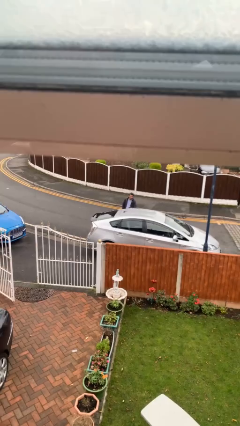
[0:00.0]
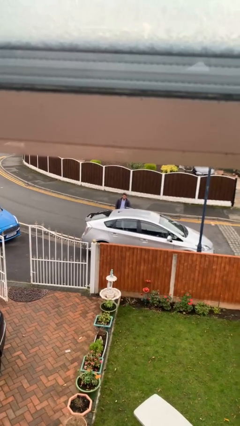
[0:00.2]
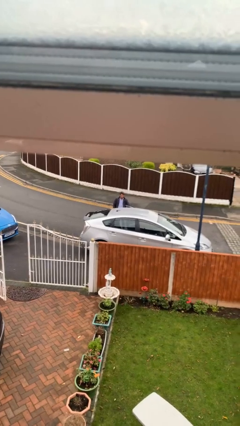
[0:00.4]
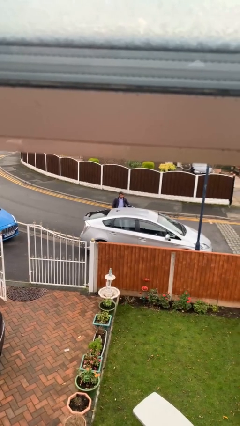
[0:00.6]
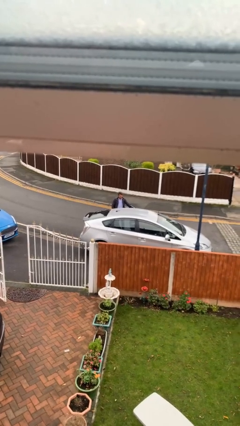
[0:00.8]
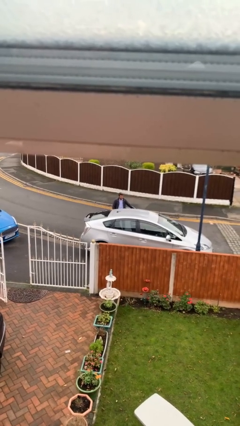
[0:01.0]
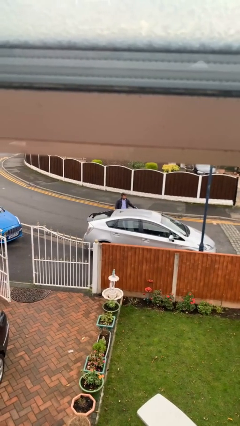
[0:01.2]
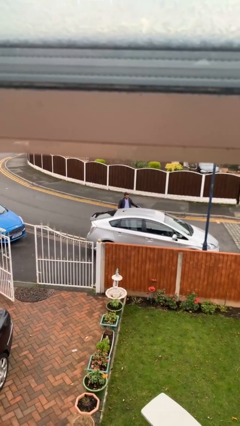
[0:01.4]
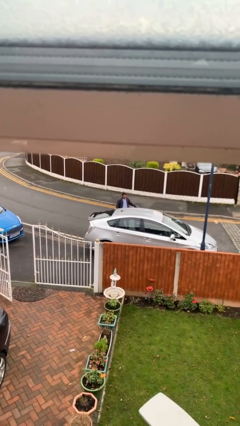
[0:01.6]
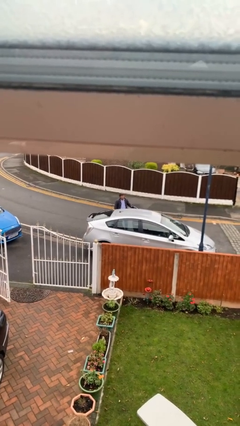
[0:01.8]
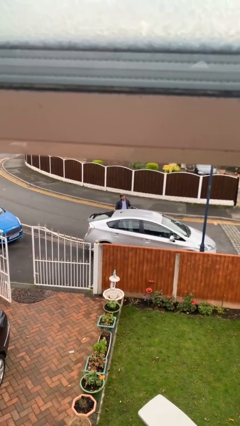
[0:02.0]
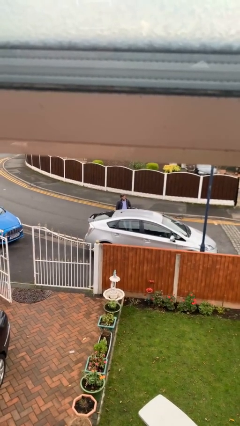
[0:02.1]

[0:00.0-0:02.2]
person opens car door

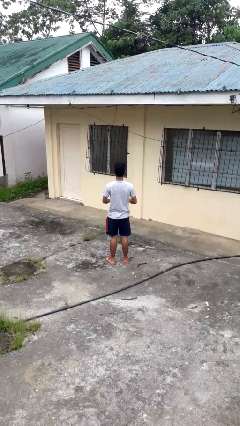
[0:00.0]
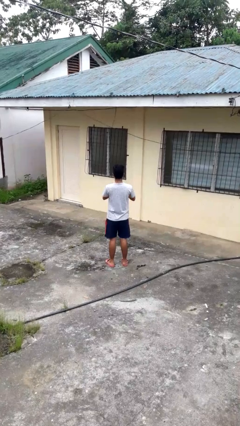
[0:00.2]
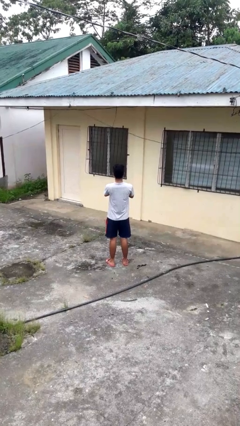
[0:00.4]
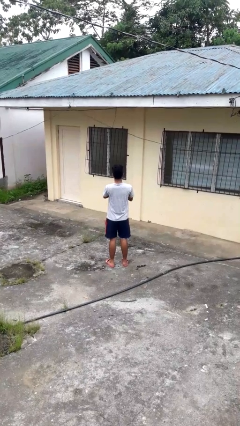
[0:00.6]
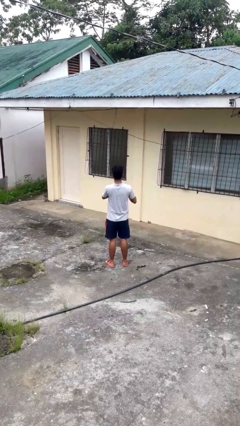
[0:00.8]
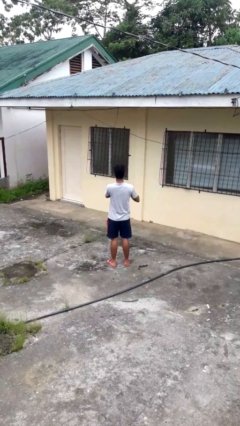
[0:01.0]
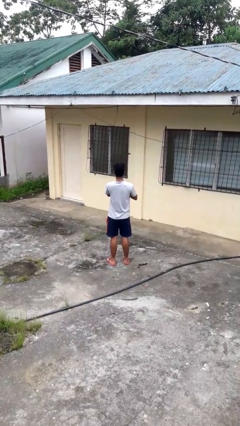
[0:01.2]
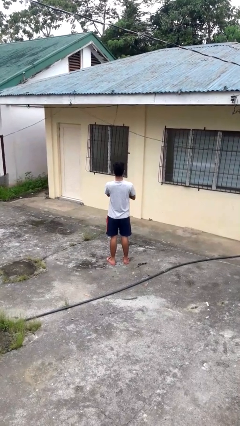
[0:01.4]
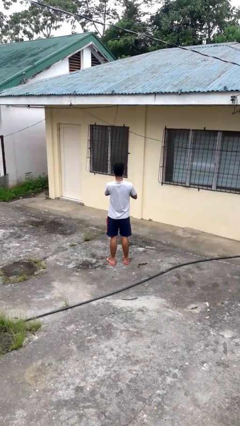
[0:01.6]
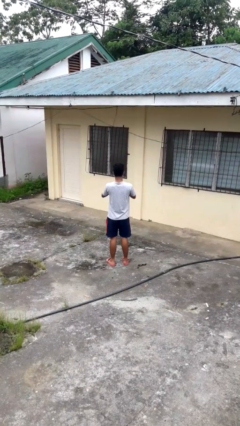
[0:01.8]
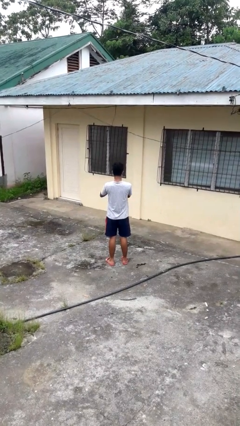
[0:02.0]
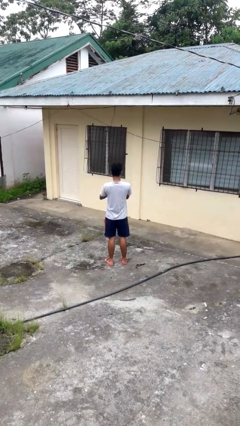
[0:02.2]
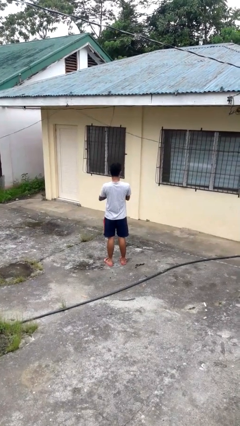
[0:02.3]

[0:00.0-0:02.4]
person cracks knuckles

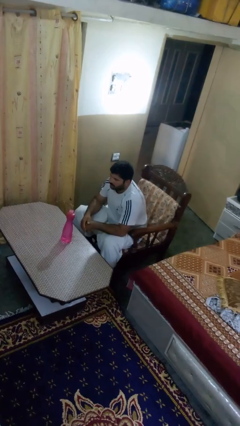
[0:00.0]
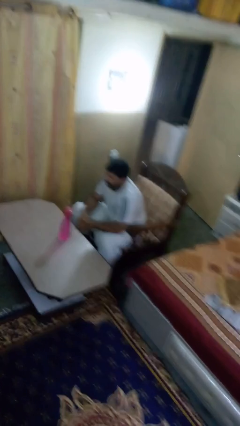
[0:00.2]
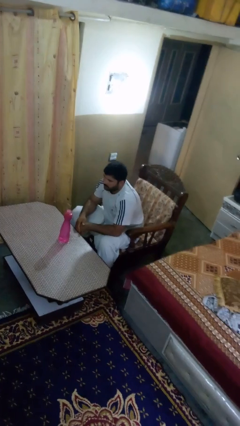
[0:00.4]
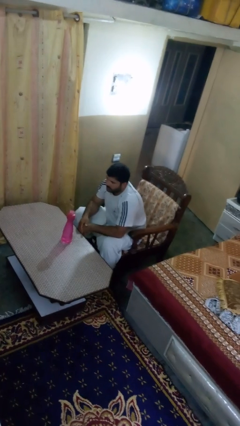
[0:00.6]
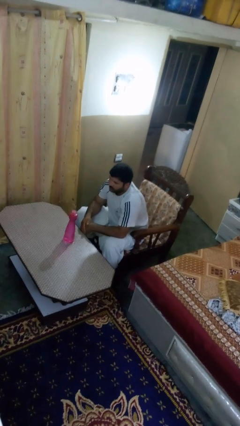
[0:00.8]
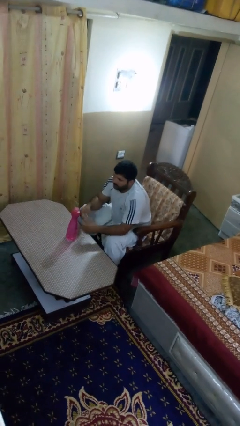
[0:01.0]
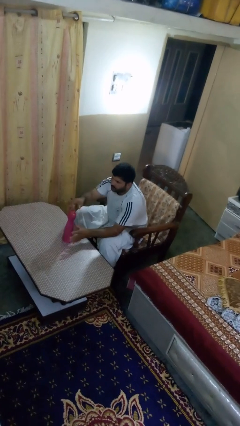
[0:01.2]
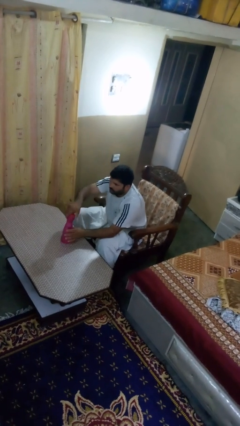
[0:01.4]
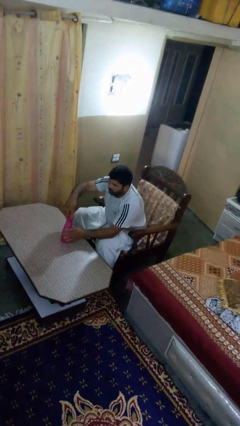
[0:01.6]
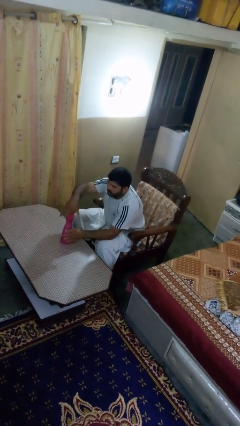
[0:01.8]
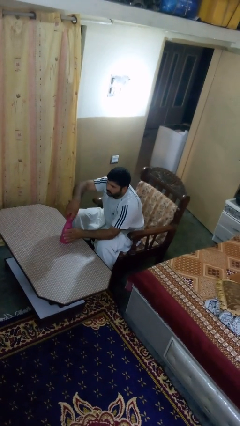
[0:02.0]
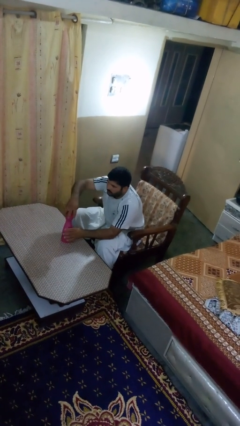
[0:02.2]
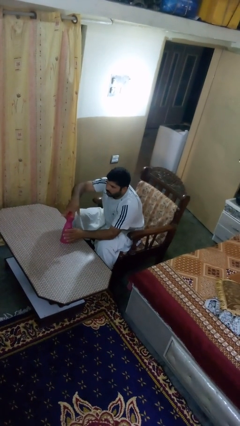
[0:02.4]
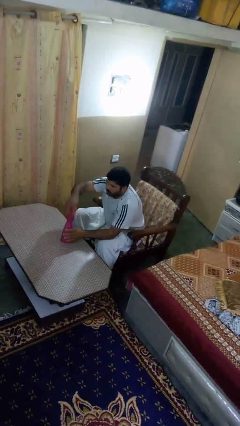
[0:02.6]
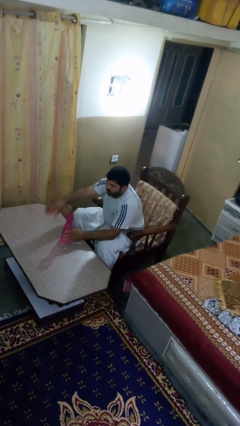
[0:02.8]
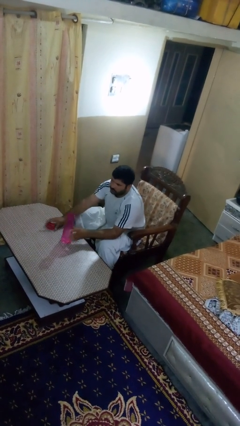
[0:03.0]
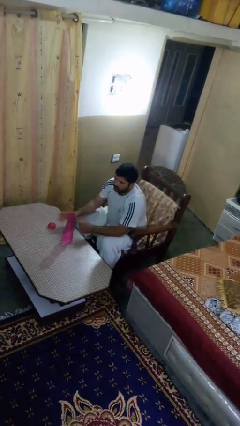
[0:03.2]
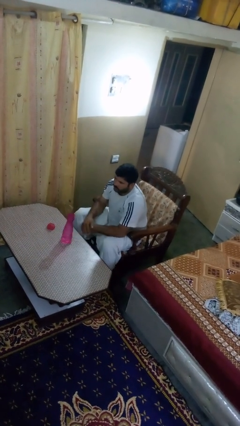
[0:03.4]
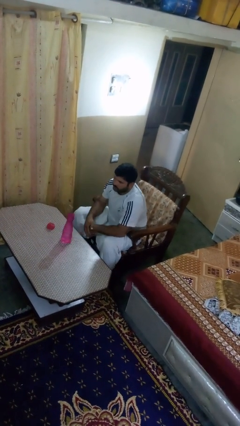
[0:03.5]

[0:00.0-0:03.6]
person unscrews lid from bottle

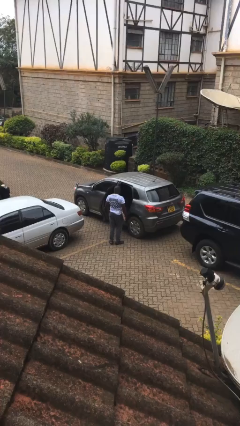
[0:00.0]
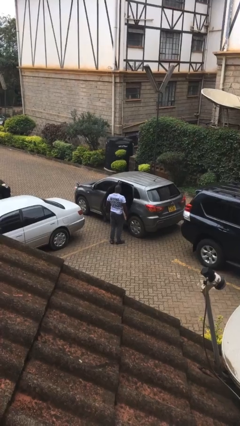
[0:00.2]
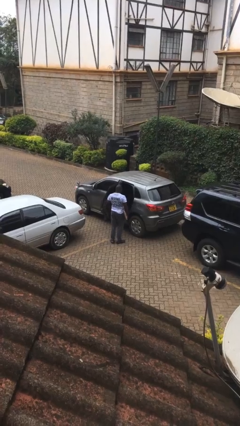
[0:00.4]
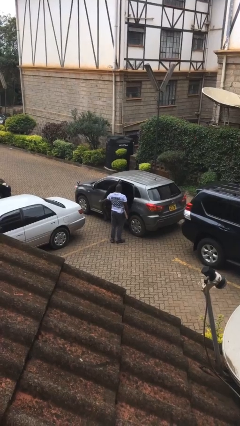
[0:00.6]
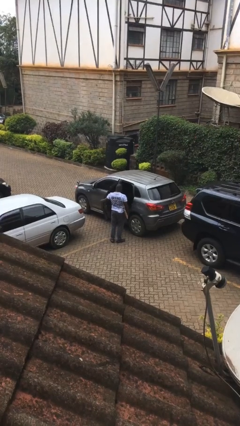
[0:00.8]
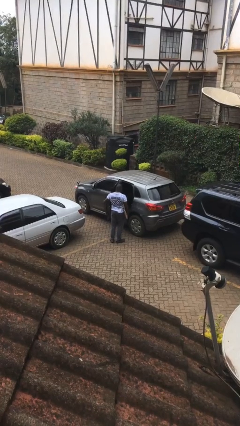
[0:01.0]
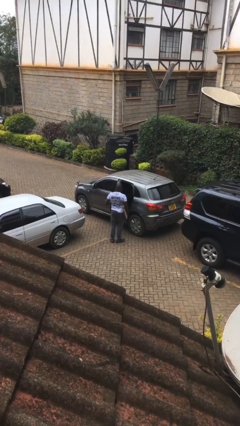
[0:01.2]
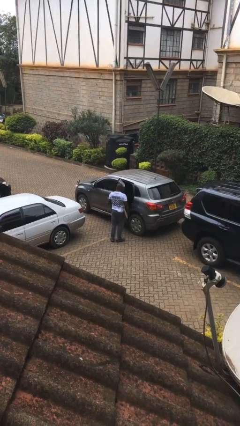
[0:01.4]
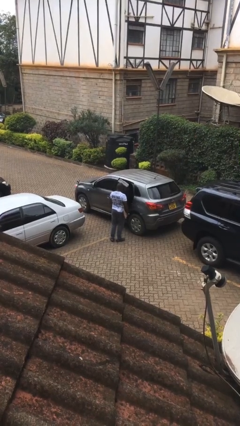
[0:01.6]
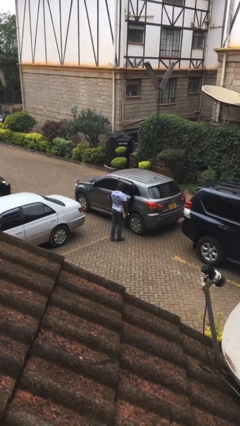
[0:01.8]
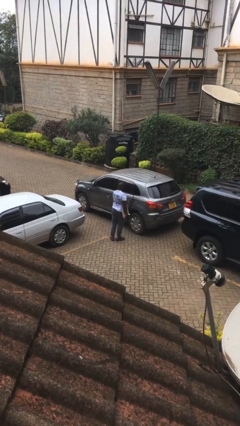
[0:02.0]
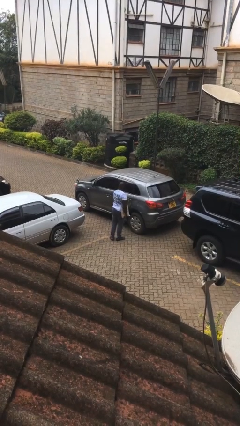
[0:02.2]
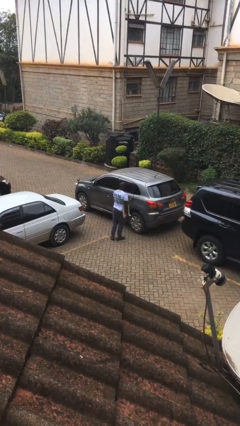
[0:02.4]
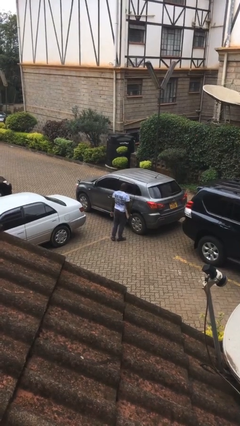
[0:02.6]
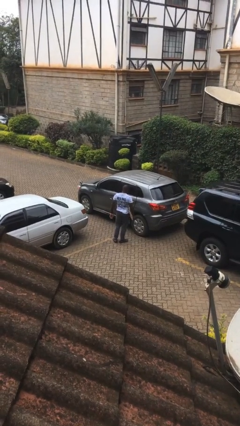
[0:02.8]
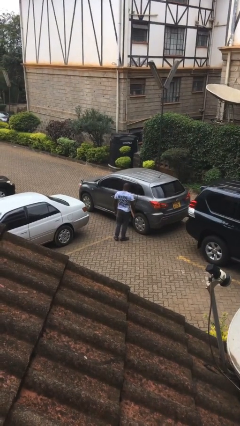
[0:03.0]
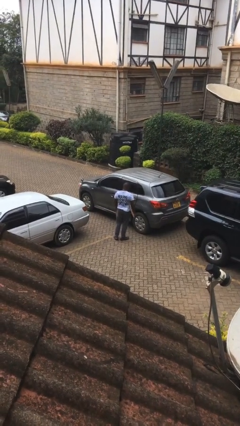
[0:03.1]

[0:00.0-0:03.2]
person closes car door

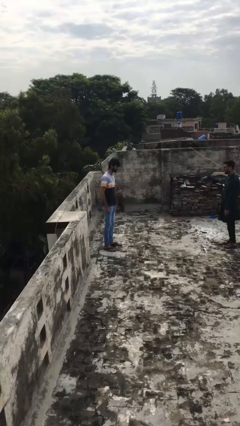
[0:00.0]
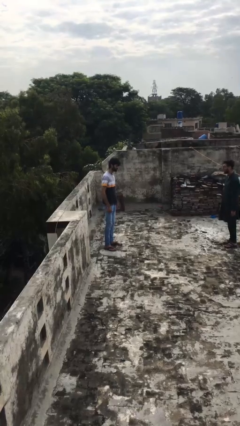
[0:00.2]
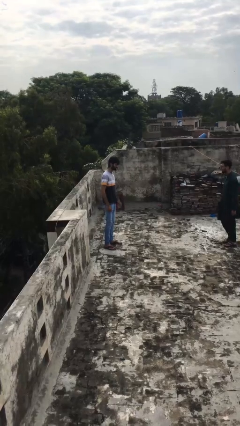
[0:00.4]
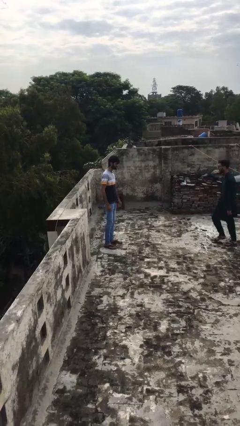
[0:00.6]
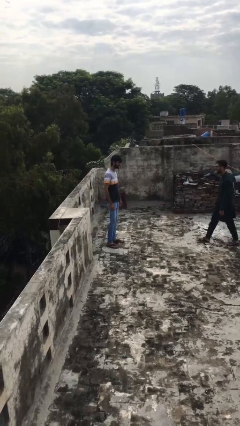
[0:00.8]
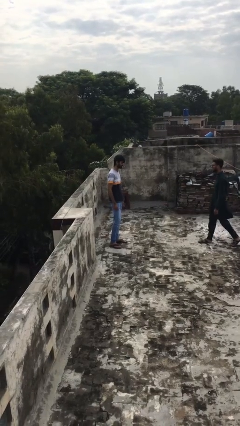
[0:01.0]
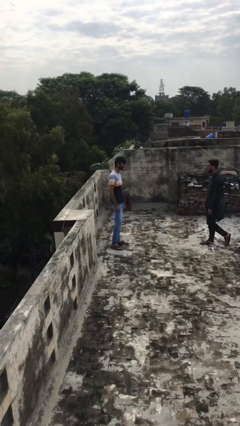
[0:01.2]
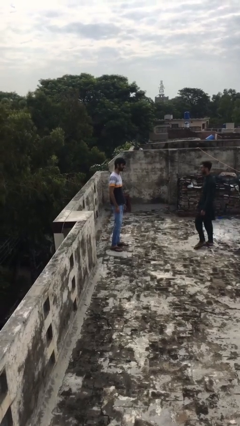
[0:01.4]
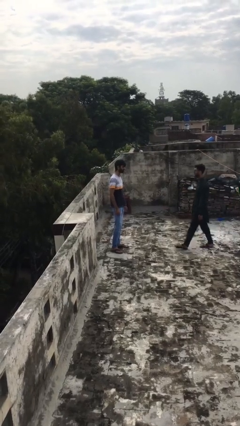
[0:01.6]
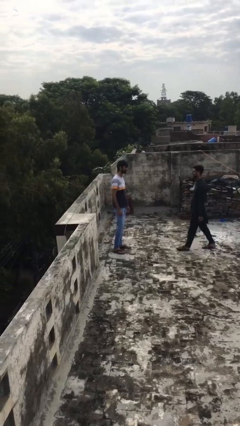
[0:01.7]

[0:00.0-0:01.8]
person shakes hand

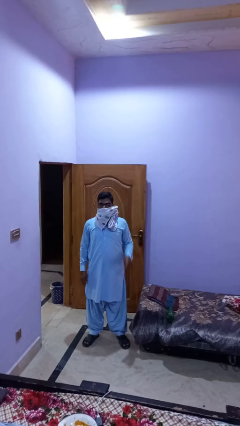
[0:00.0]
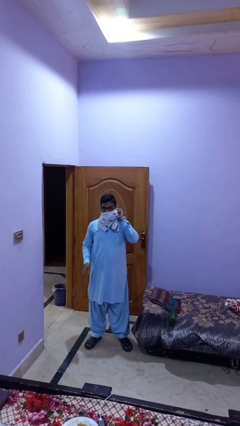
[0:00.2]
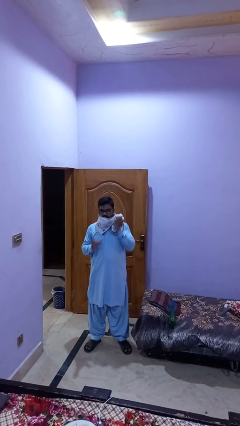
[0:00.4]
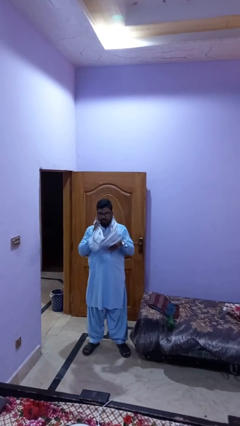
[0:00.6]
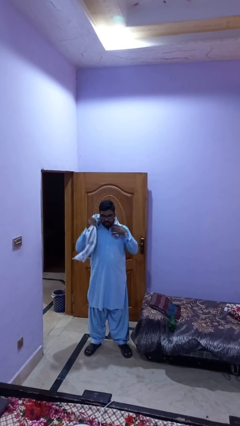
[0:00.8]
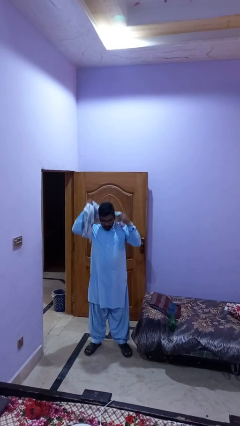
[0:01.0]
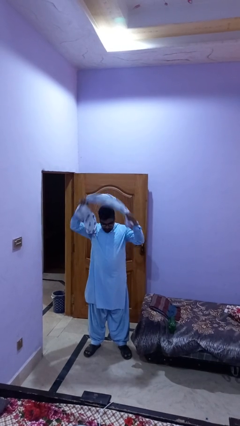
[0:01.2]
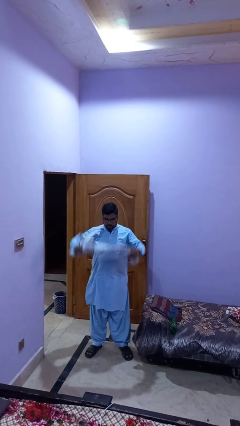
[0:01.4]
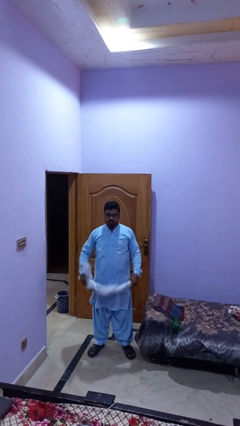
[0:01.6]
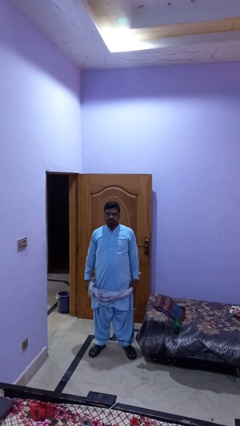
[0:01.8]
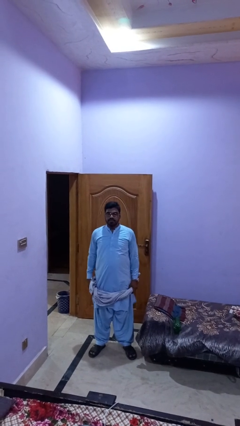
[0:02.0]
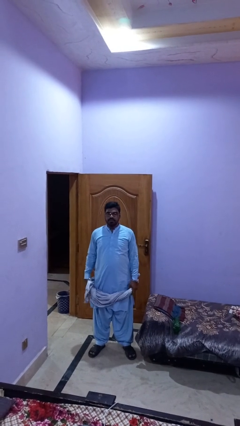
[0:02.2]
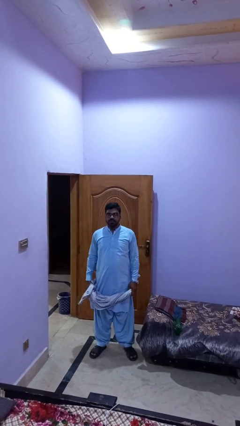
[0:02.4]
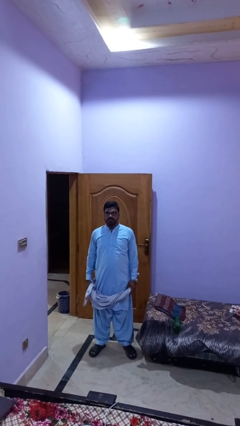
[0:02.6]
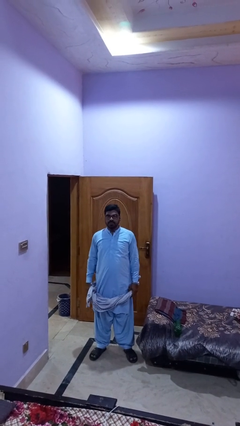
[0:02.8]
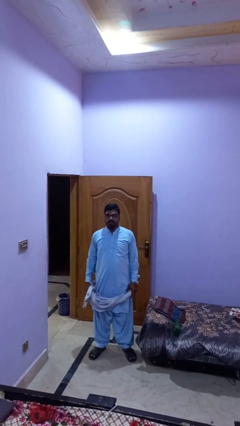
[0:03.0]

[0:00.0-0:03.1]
person takes off scarf

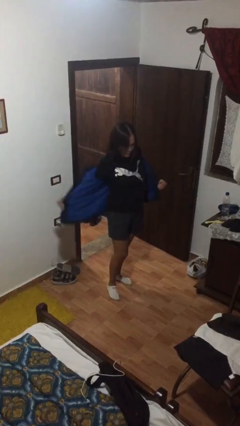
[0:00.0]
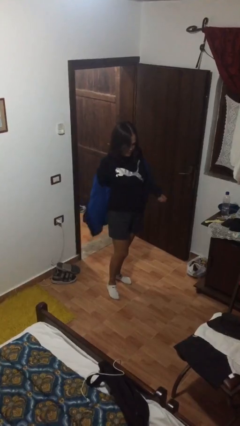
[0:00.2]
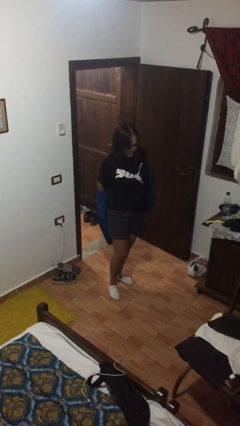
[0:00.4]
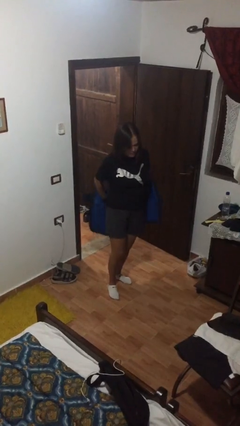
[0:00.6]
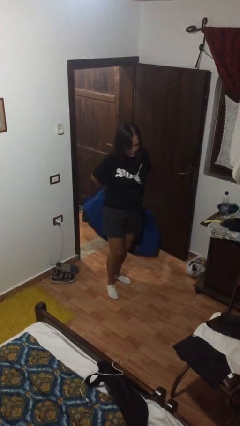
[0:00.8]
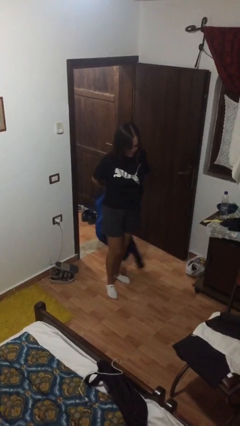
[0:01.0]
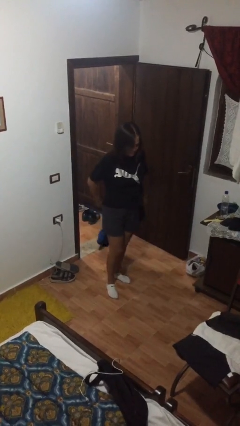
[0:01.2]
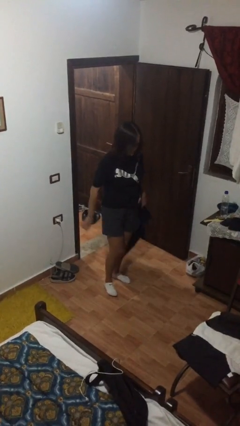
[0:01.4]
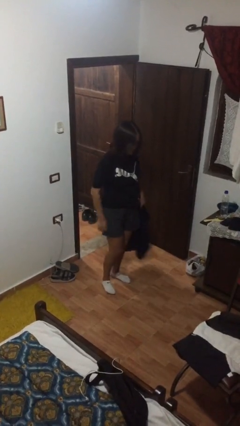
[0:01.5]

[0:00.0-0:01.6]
person takes off jacket
